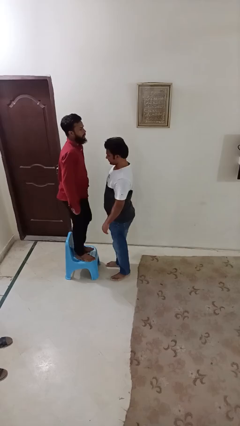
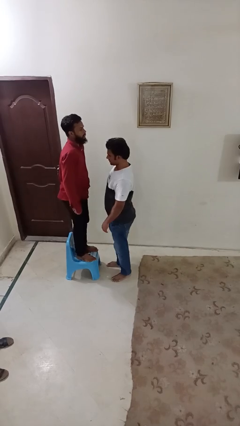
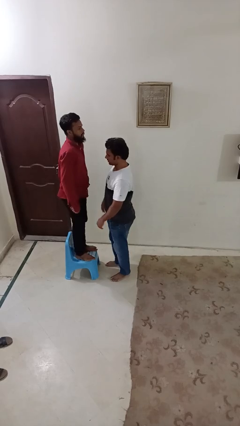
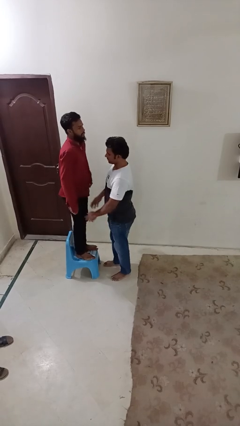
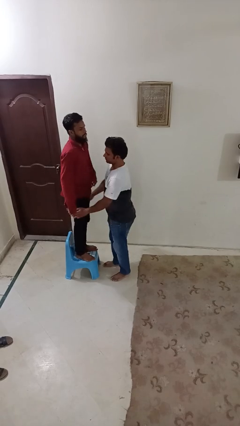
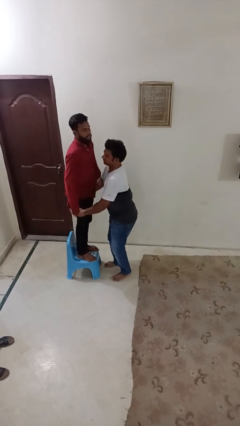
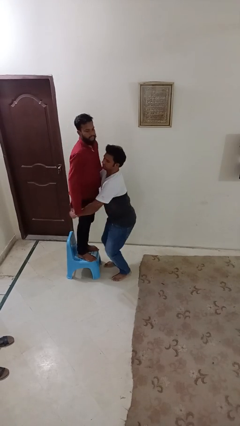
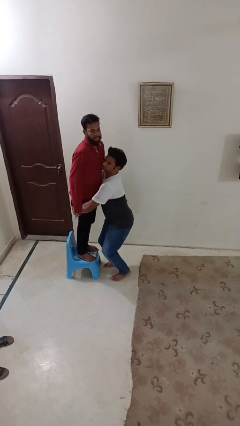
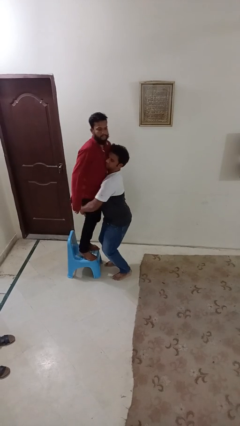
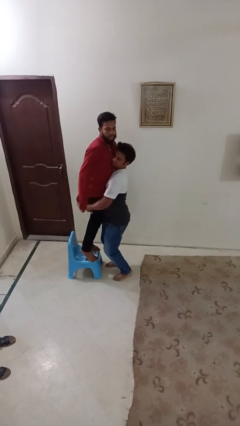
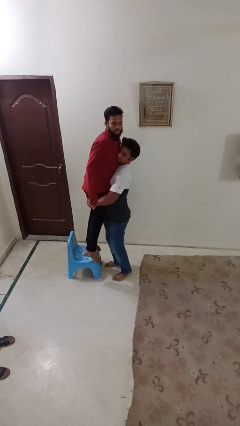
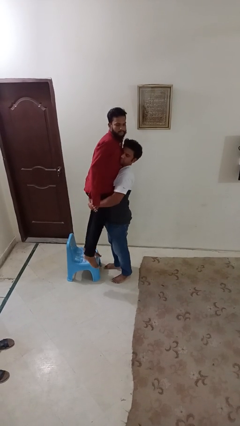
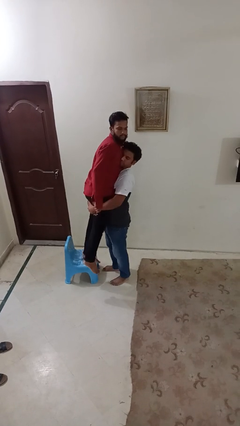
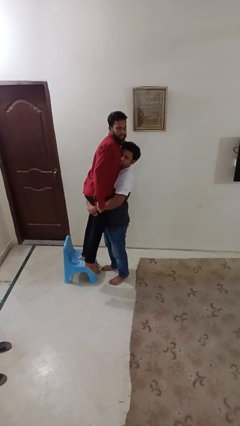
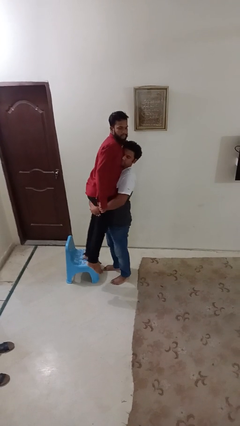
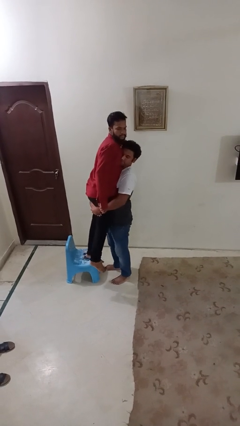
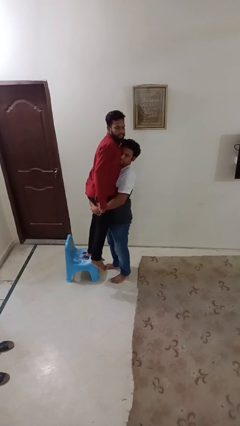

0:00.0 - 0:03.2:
person picks up person

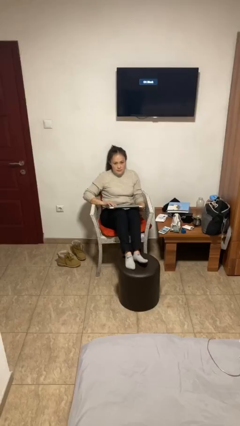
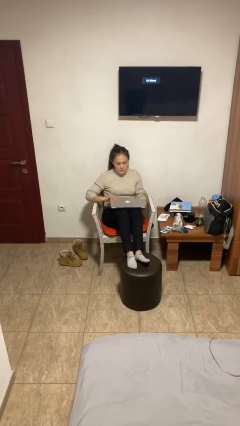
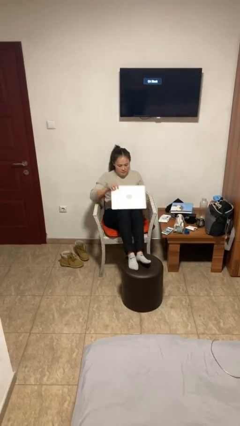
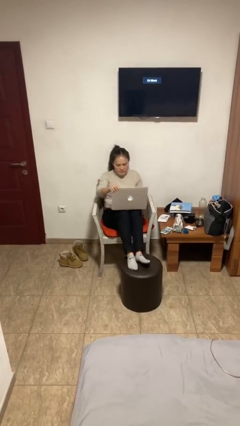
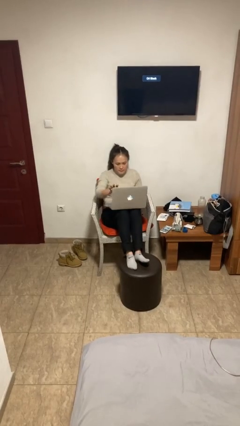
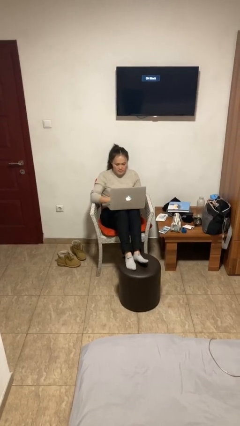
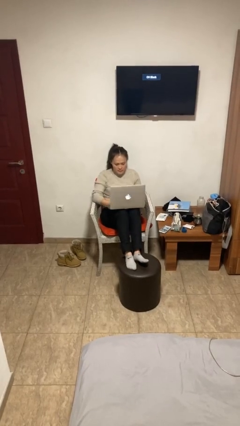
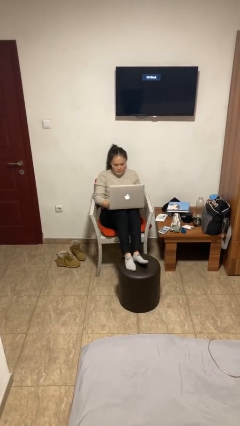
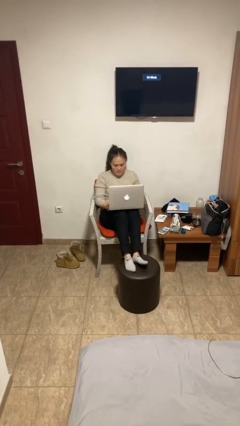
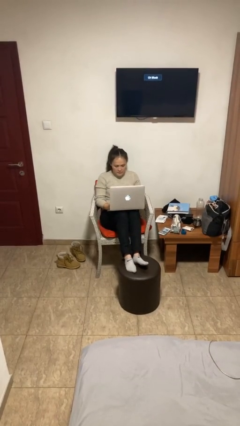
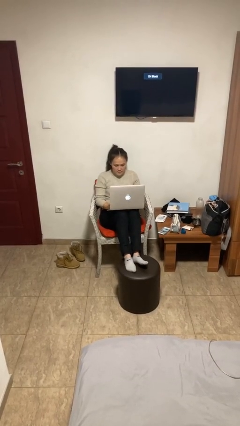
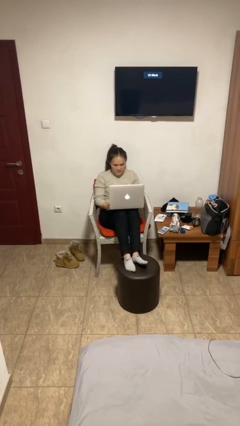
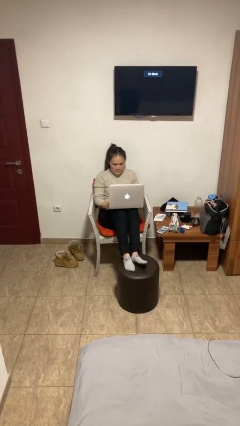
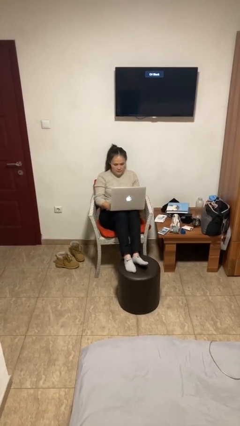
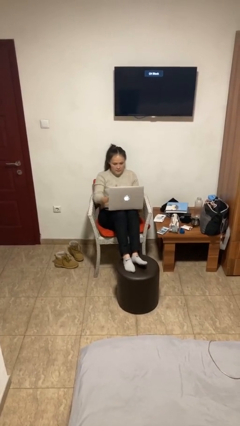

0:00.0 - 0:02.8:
person interacts with laptop

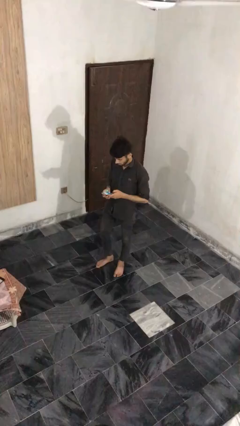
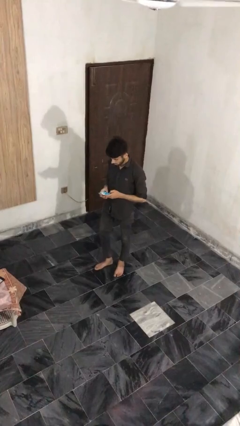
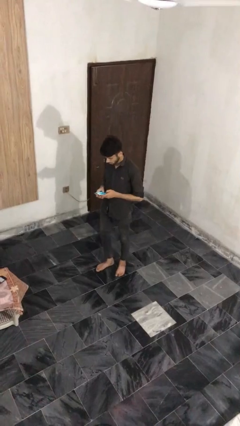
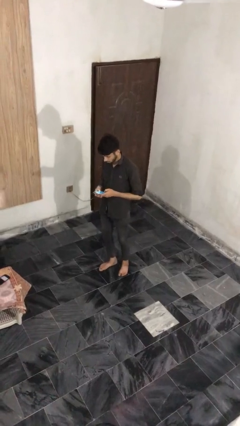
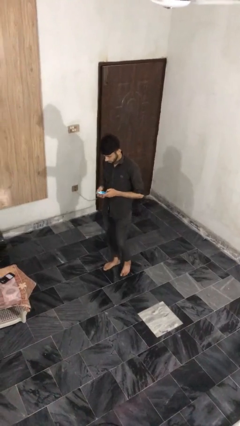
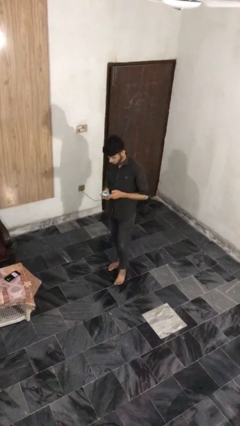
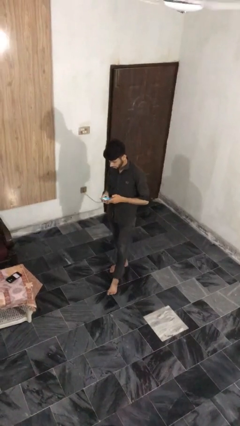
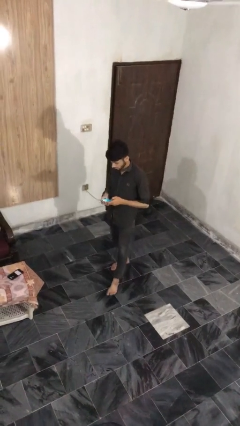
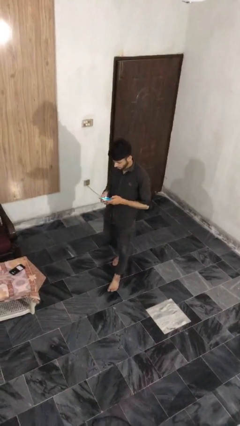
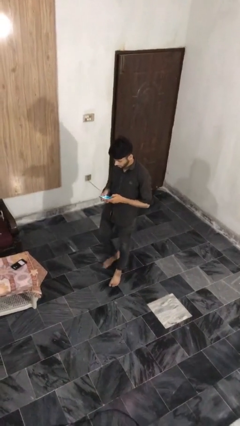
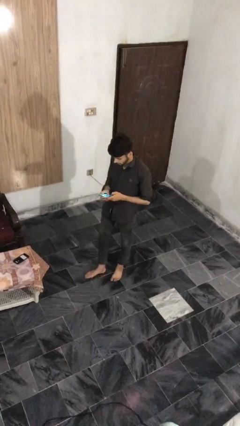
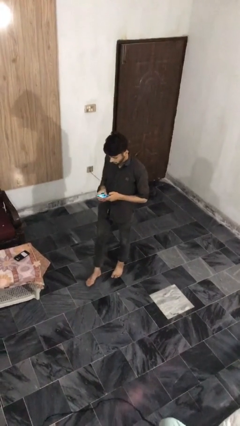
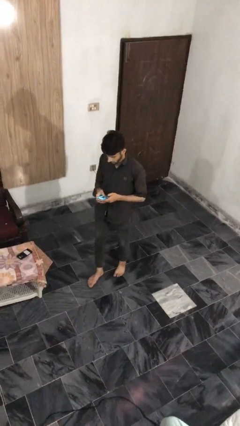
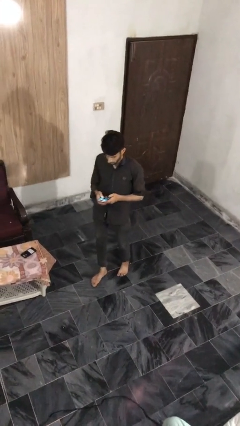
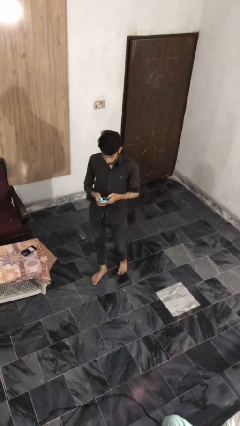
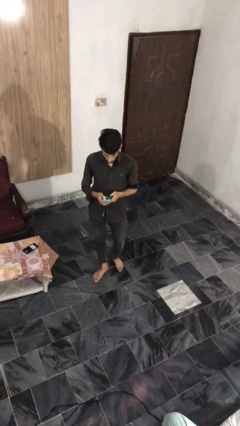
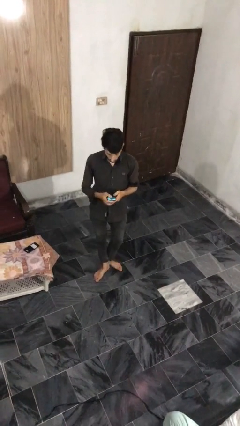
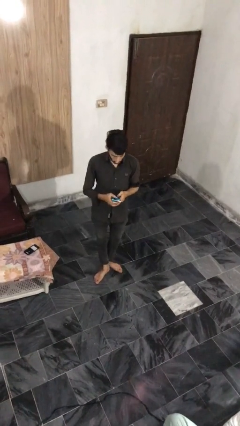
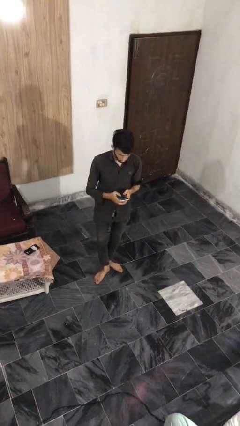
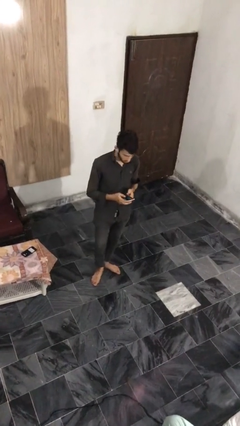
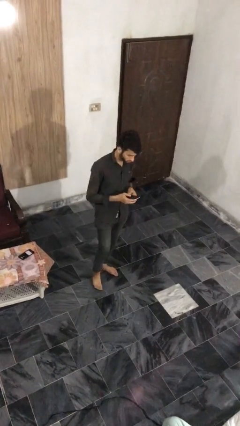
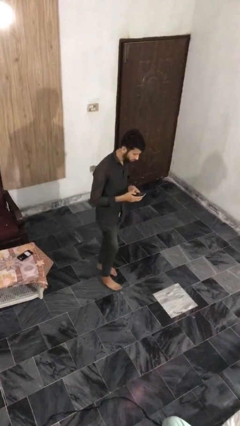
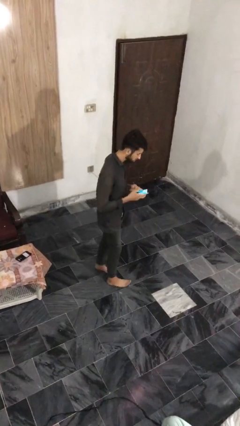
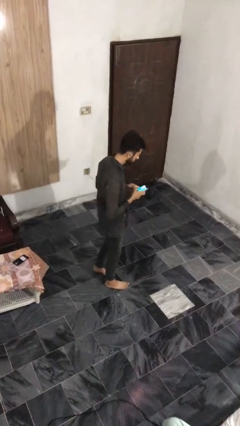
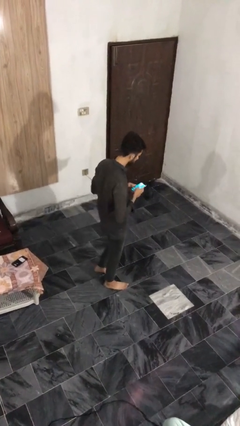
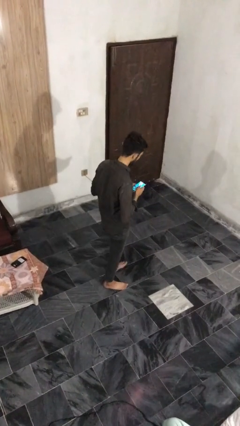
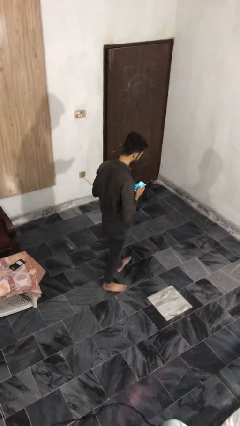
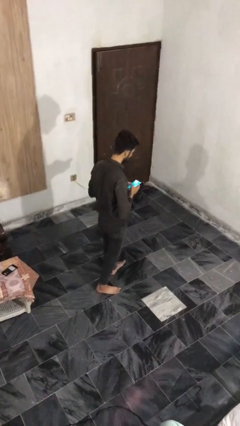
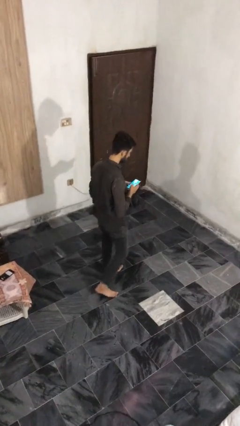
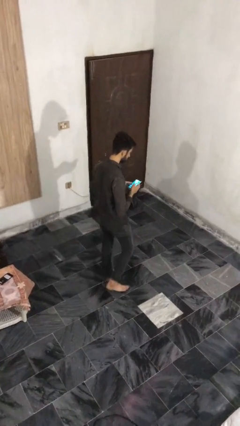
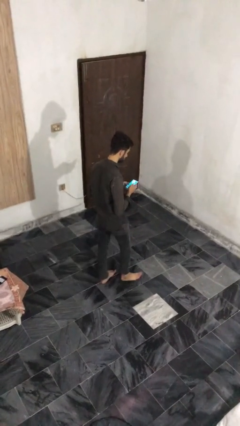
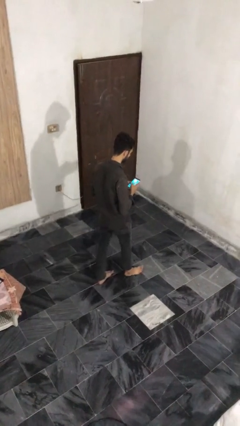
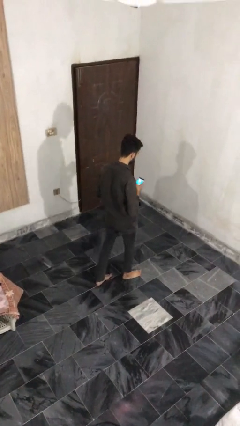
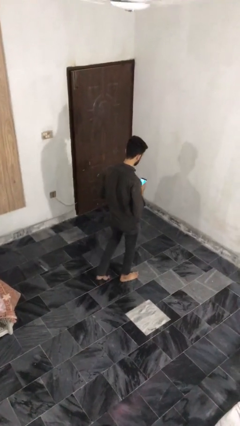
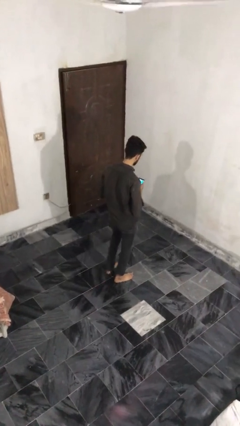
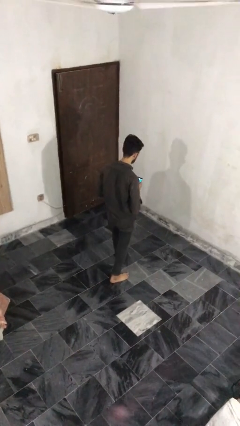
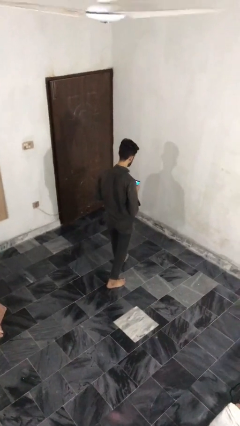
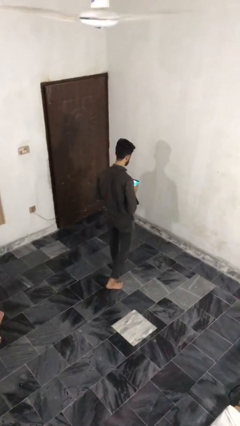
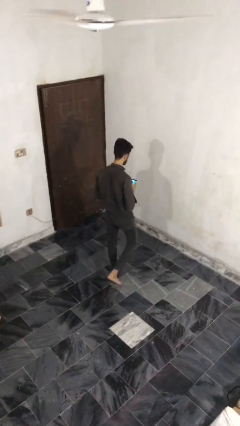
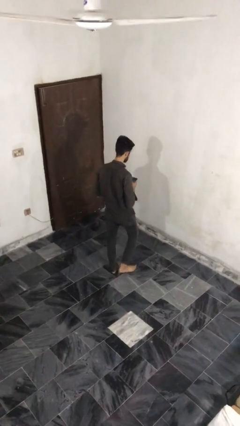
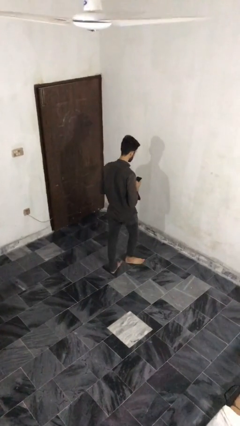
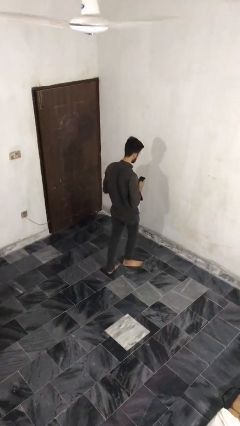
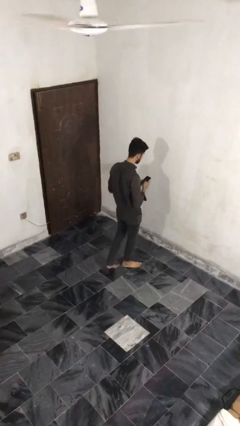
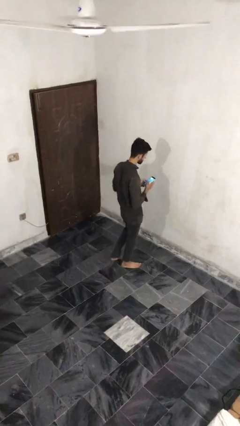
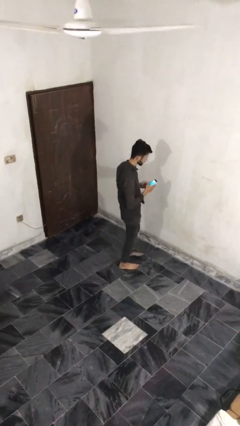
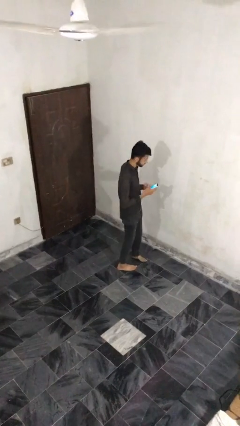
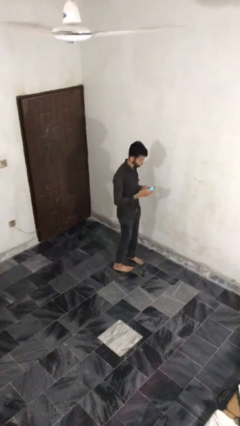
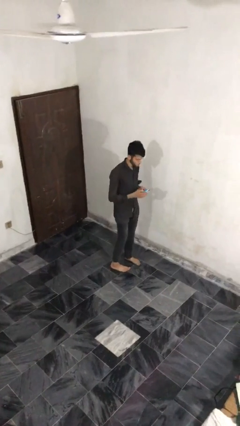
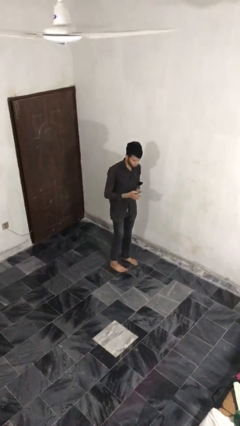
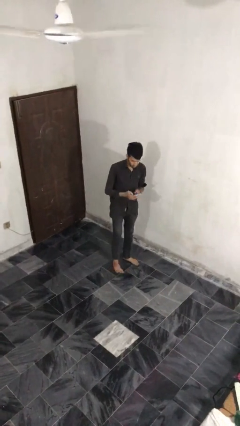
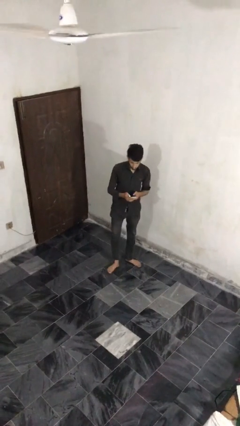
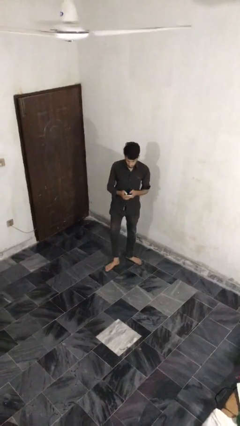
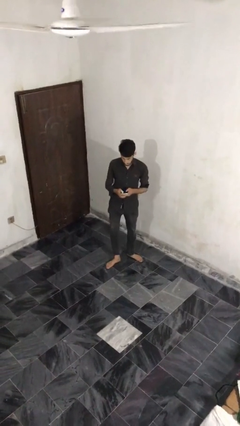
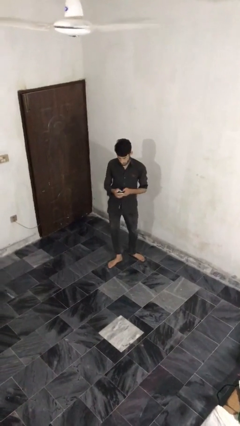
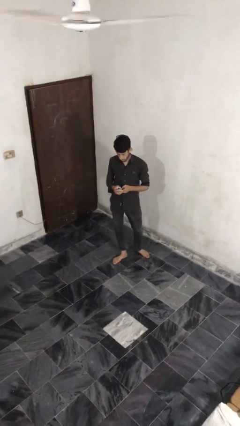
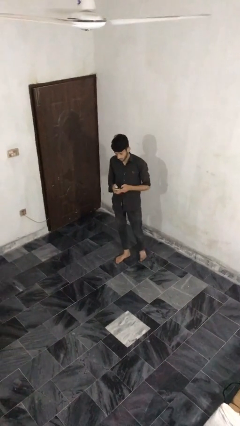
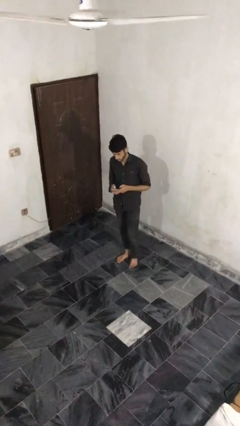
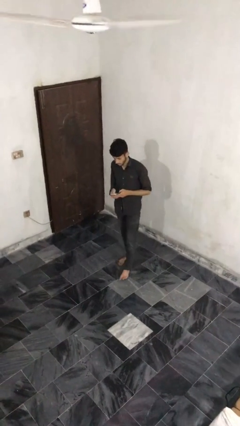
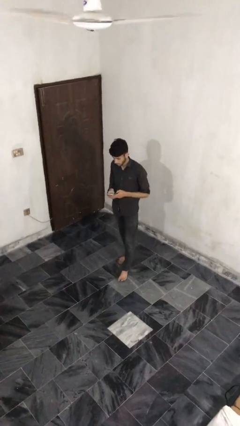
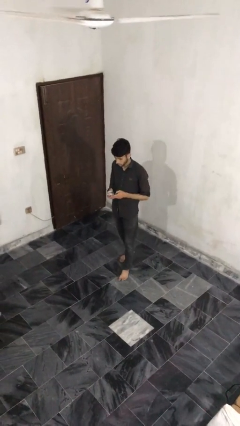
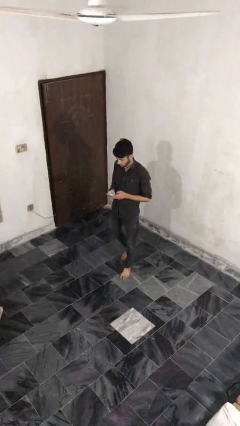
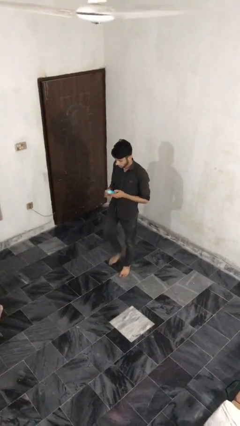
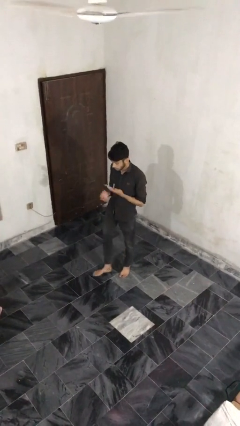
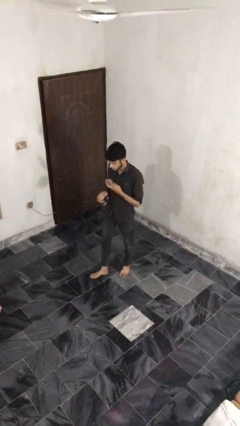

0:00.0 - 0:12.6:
person texts on phone
